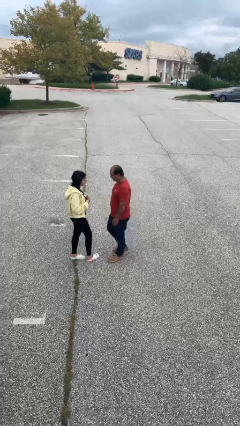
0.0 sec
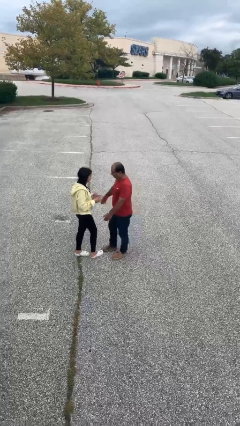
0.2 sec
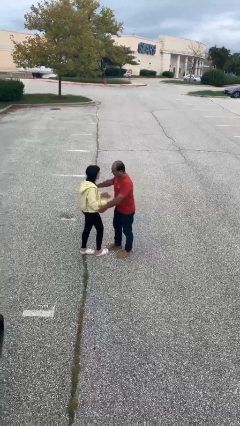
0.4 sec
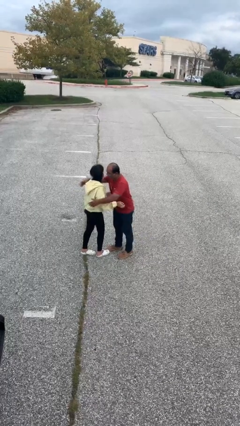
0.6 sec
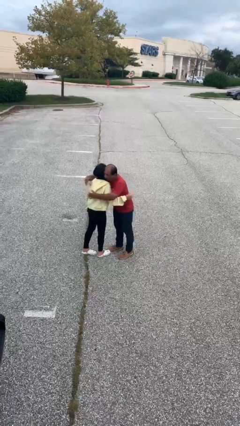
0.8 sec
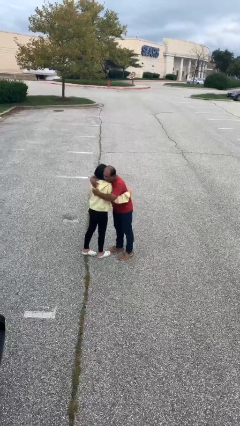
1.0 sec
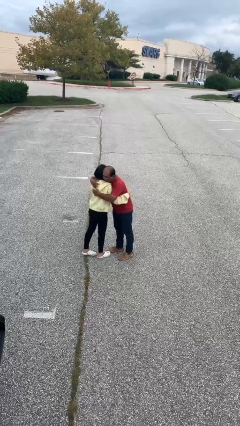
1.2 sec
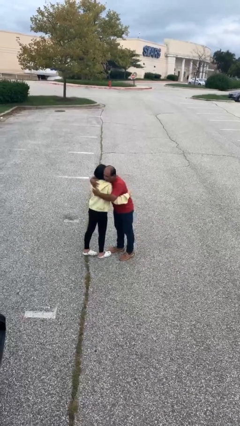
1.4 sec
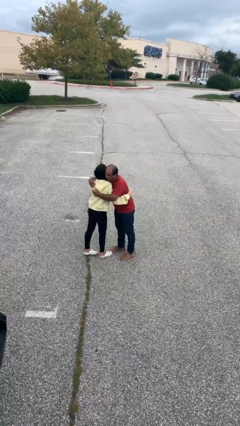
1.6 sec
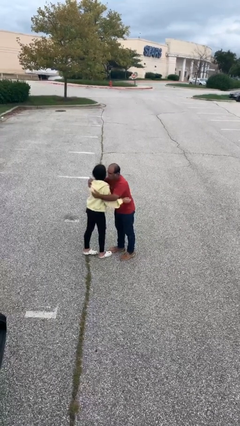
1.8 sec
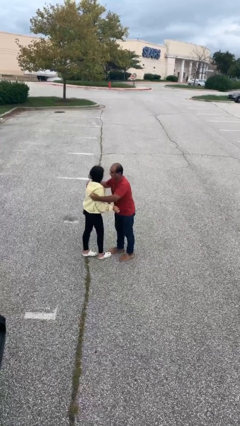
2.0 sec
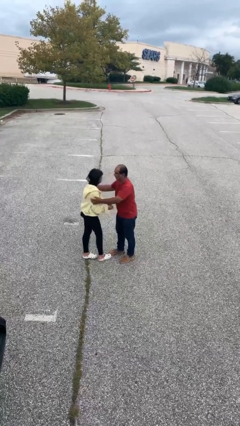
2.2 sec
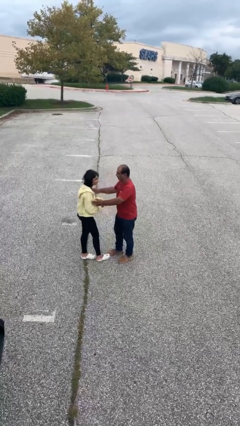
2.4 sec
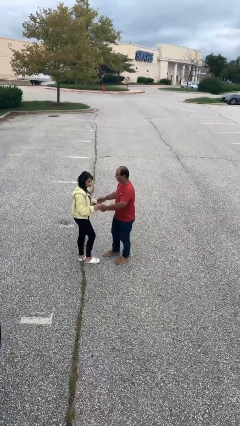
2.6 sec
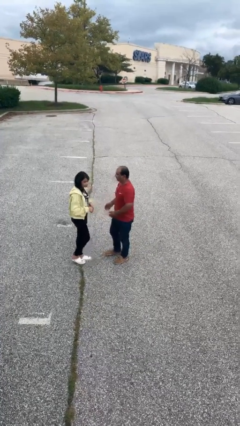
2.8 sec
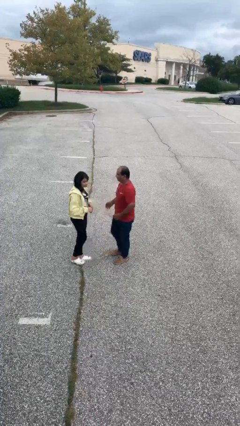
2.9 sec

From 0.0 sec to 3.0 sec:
person embraces person

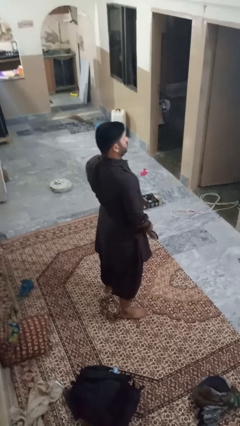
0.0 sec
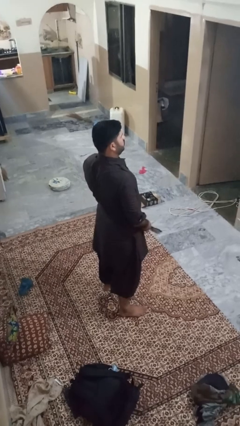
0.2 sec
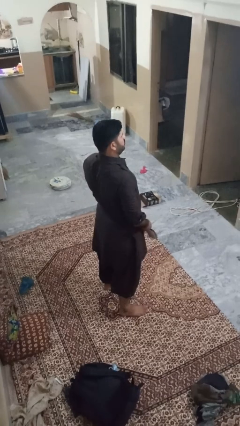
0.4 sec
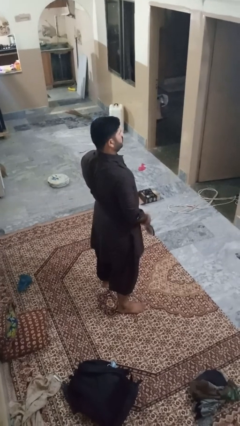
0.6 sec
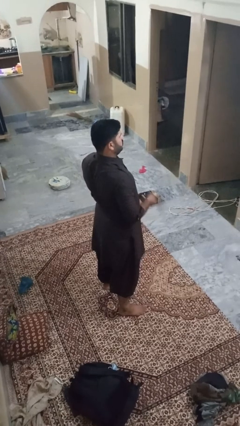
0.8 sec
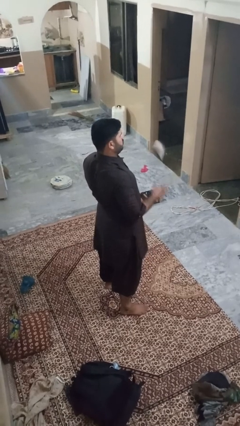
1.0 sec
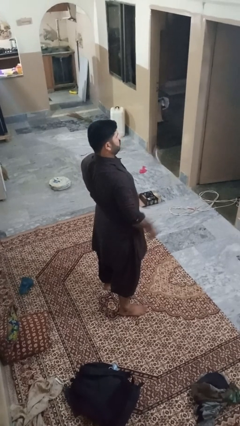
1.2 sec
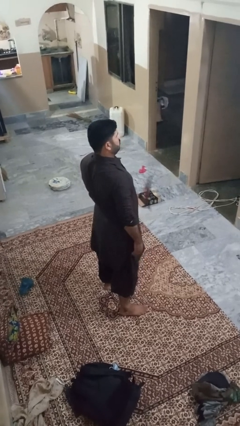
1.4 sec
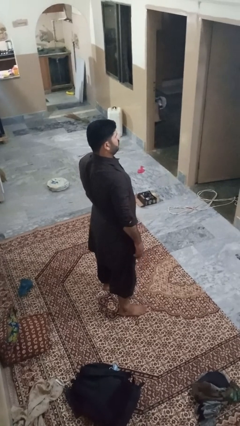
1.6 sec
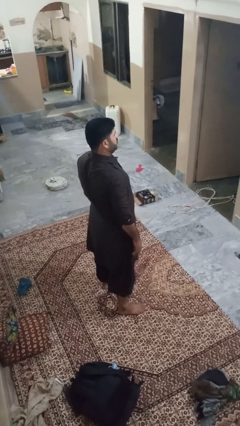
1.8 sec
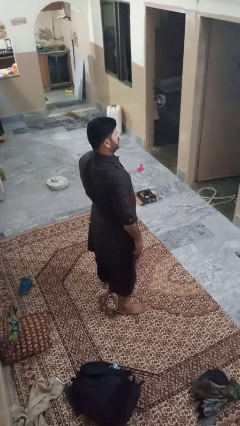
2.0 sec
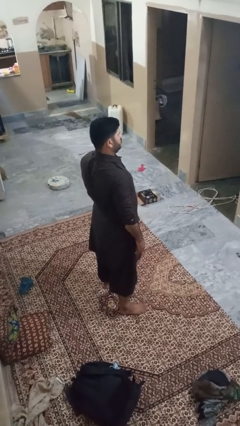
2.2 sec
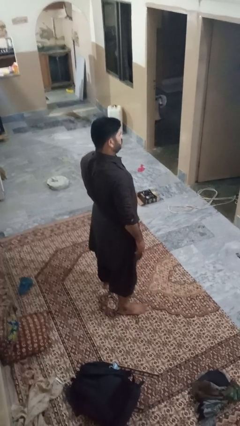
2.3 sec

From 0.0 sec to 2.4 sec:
person throws object into air

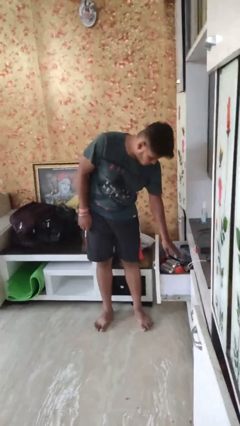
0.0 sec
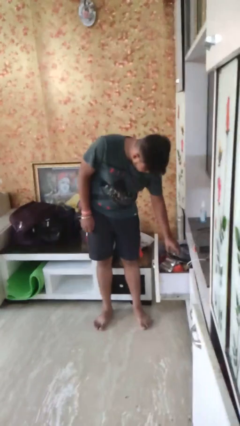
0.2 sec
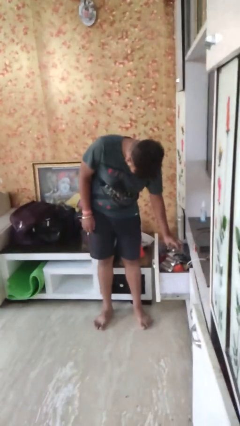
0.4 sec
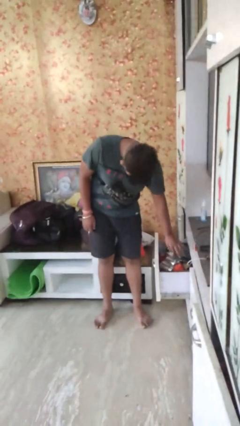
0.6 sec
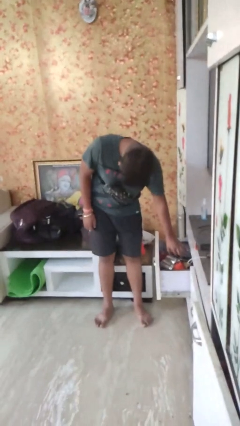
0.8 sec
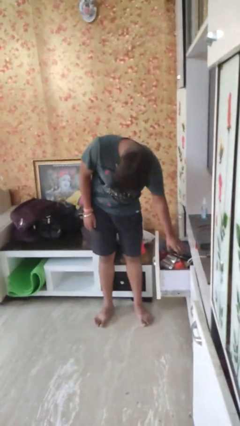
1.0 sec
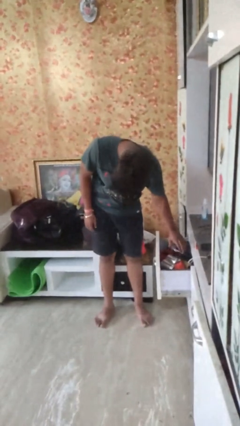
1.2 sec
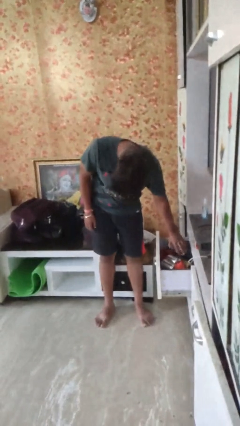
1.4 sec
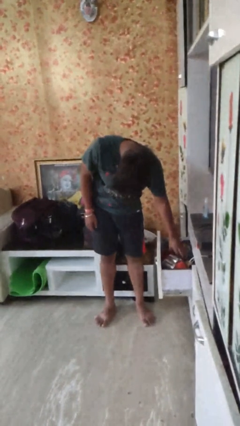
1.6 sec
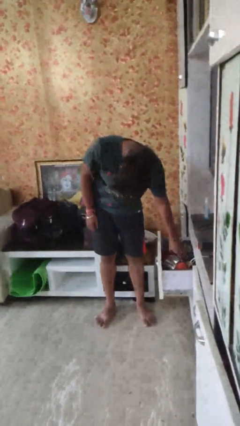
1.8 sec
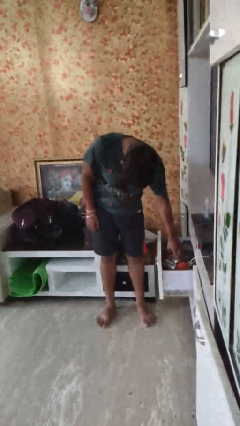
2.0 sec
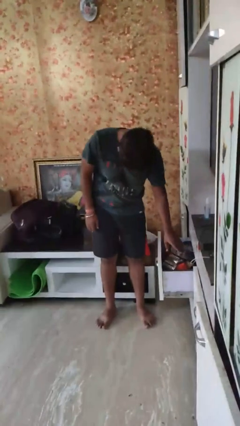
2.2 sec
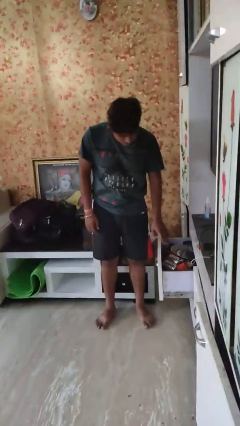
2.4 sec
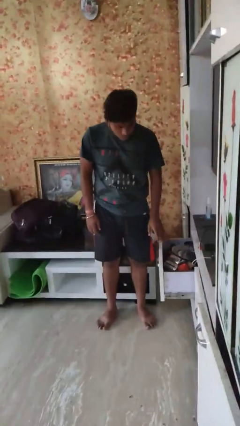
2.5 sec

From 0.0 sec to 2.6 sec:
person searches in kitchen drawer

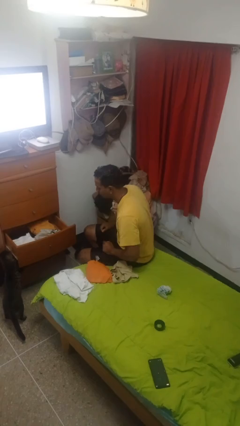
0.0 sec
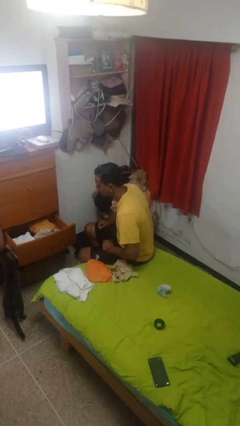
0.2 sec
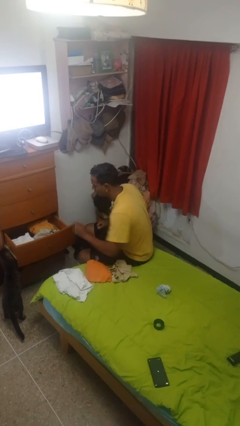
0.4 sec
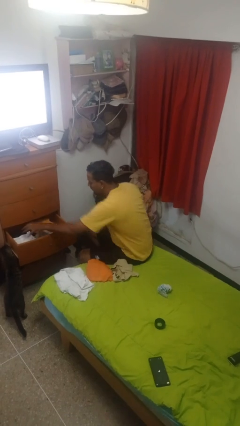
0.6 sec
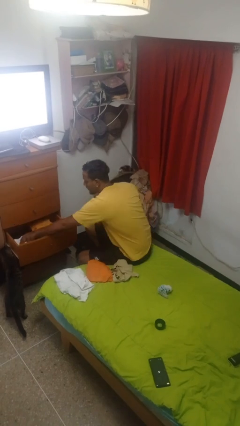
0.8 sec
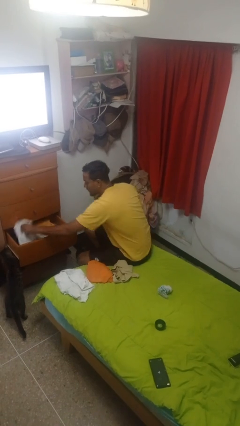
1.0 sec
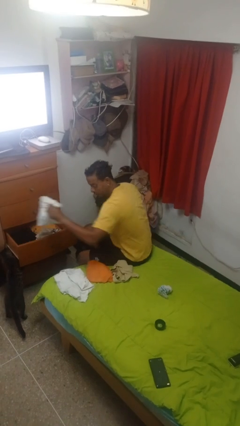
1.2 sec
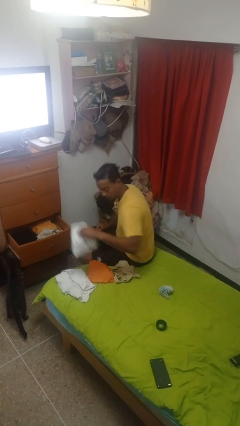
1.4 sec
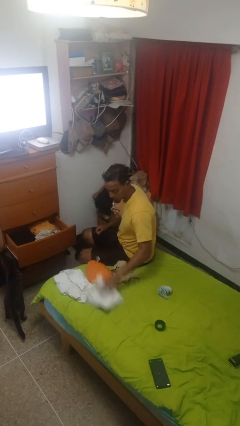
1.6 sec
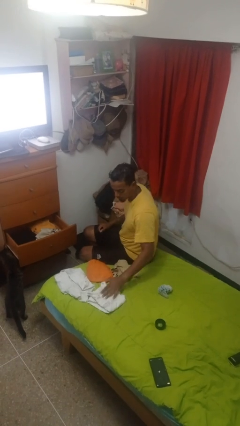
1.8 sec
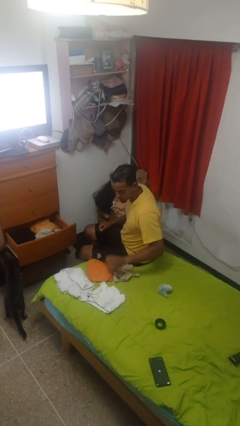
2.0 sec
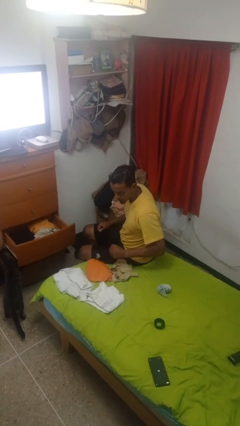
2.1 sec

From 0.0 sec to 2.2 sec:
person takes clothes from dresser

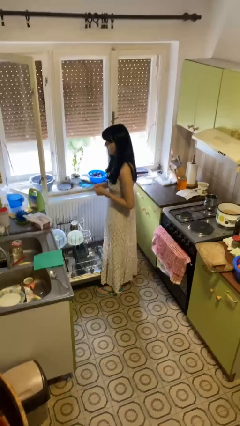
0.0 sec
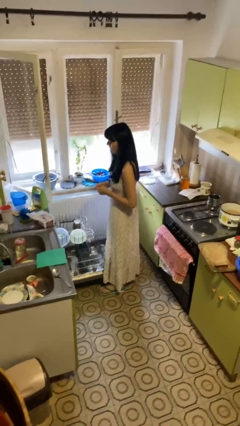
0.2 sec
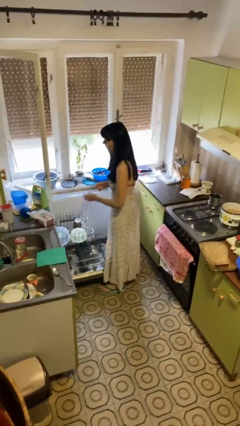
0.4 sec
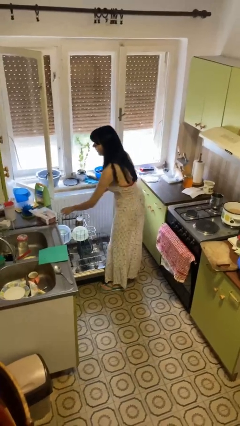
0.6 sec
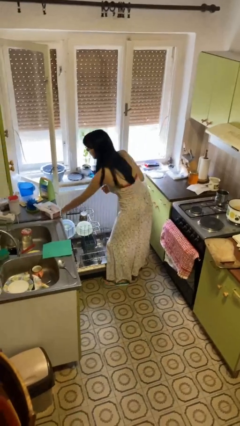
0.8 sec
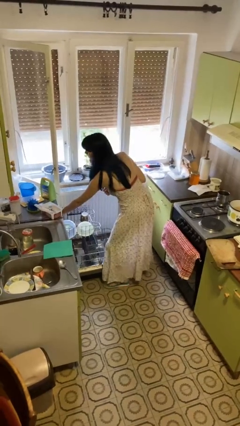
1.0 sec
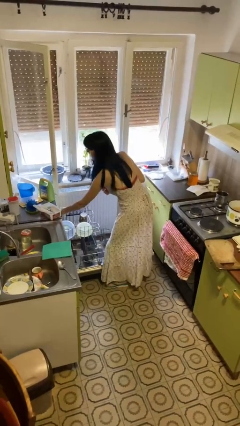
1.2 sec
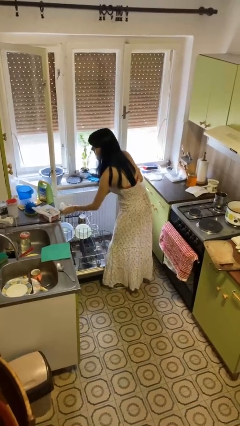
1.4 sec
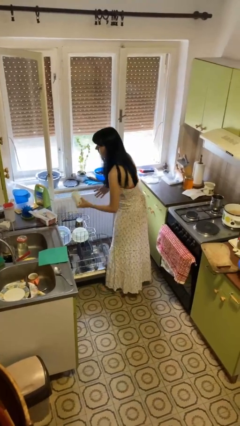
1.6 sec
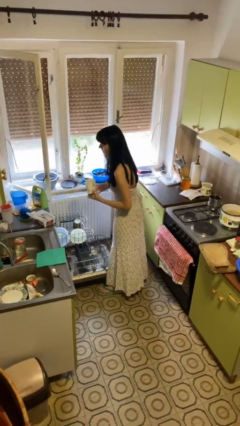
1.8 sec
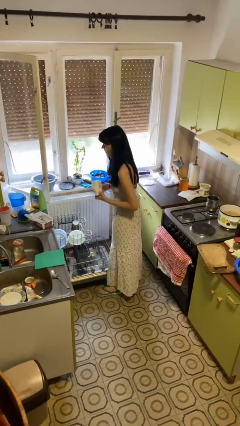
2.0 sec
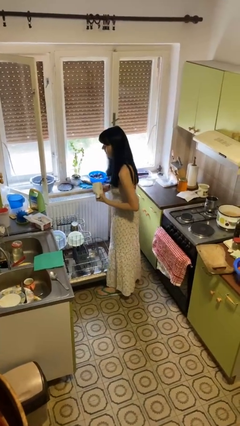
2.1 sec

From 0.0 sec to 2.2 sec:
person unloads dishwasher

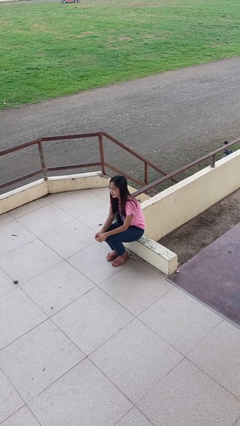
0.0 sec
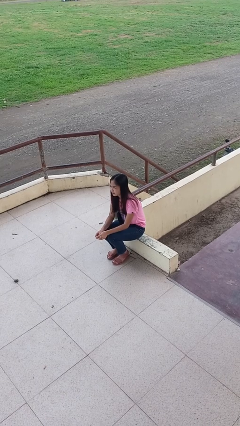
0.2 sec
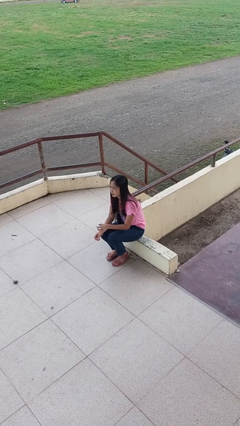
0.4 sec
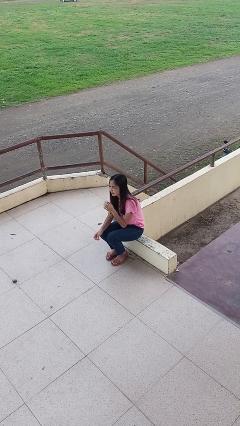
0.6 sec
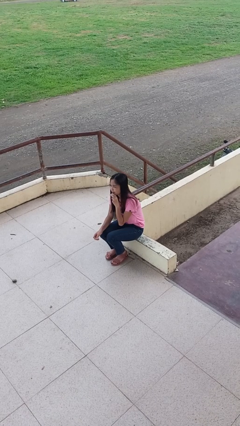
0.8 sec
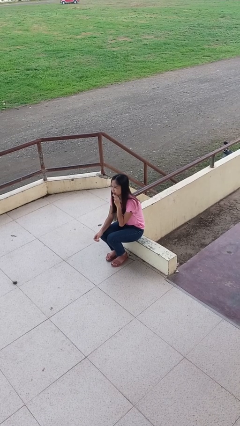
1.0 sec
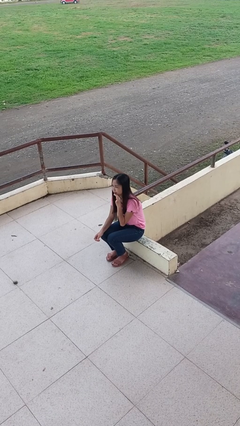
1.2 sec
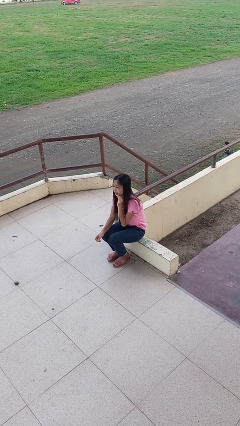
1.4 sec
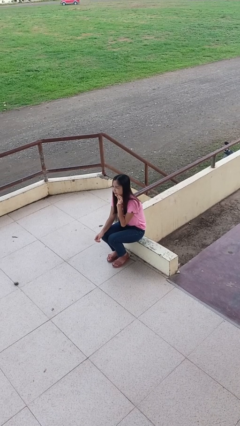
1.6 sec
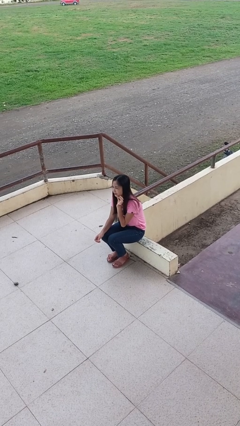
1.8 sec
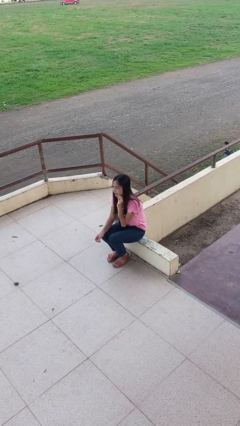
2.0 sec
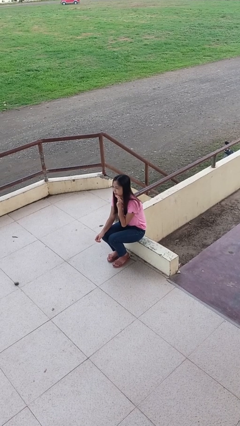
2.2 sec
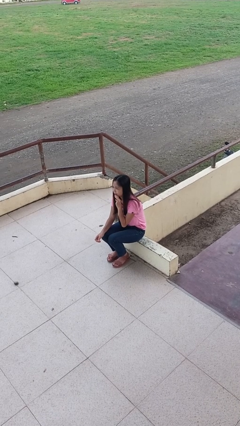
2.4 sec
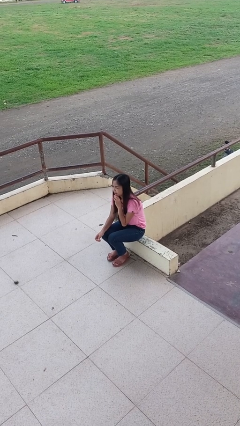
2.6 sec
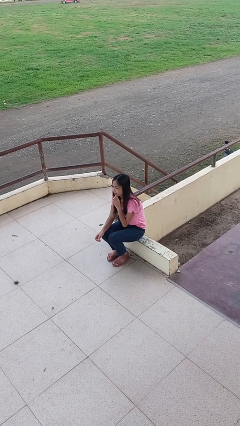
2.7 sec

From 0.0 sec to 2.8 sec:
person strokes chin

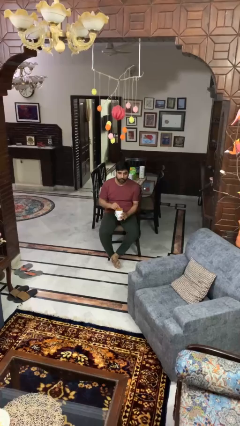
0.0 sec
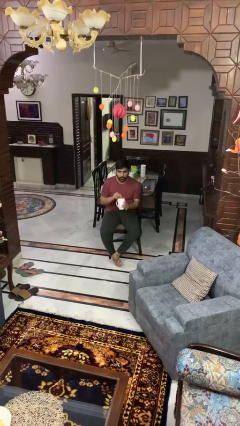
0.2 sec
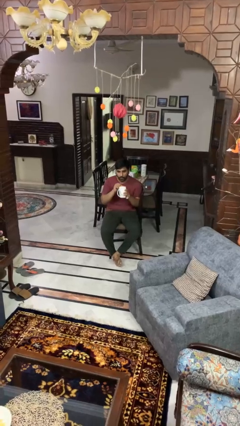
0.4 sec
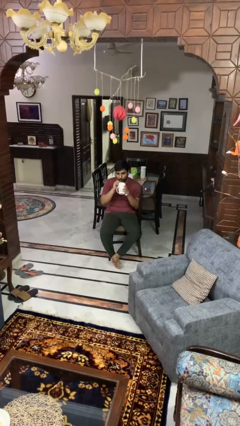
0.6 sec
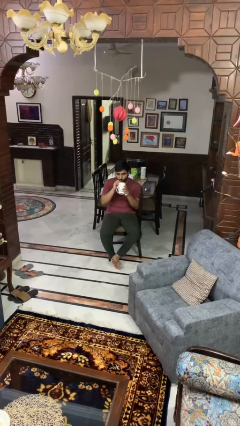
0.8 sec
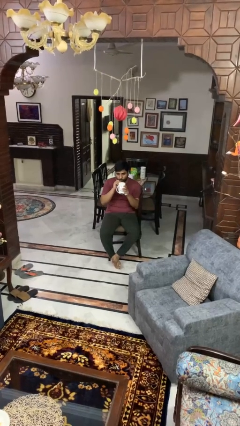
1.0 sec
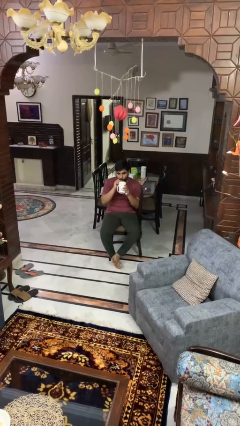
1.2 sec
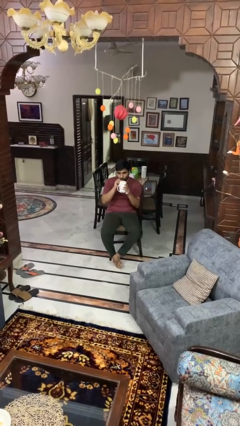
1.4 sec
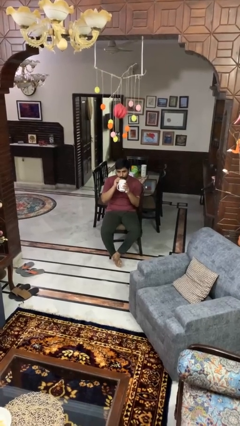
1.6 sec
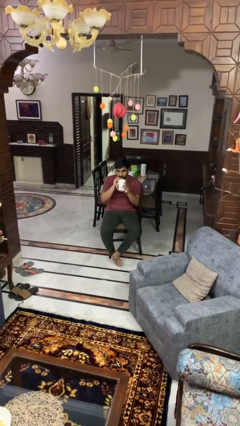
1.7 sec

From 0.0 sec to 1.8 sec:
person drinks from straw
